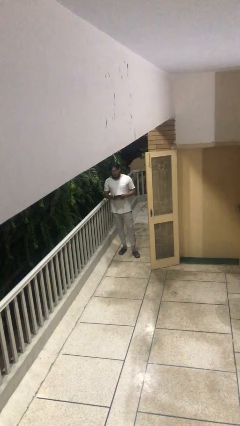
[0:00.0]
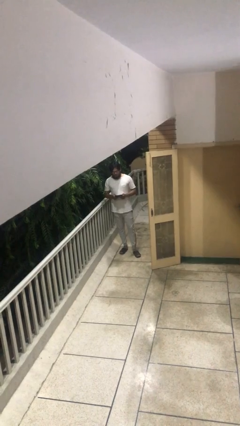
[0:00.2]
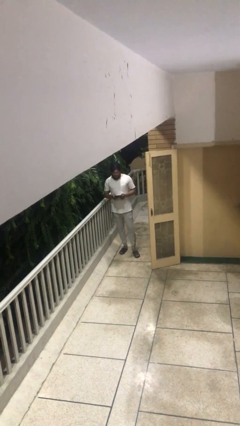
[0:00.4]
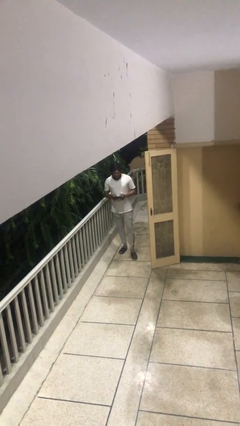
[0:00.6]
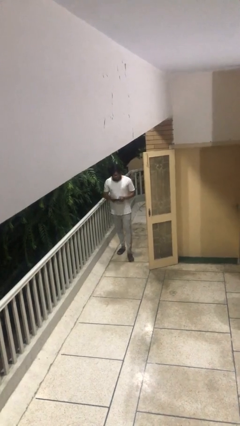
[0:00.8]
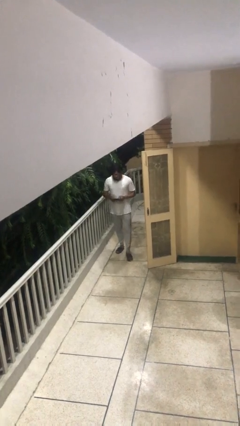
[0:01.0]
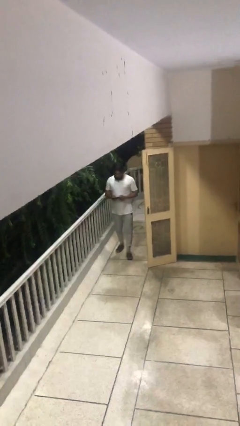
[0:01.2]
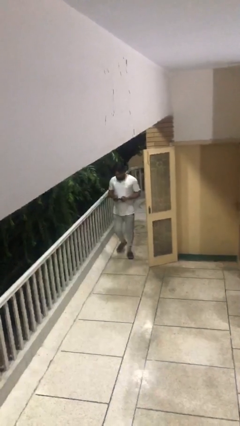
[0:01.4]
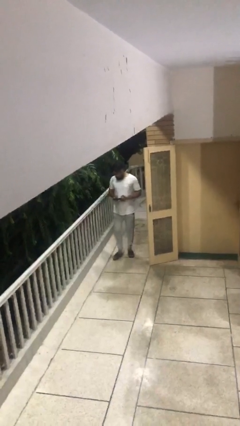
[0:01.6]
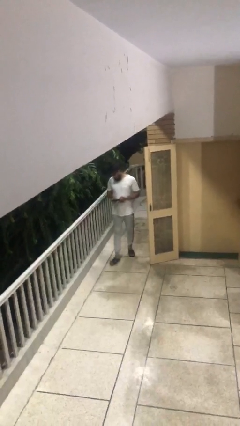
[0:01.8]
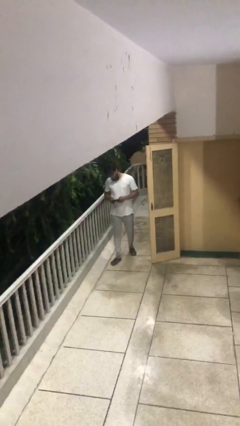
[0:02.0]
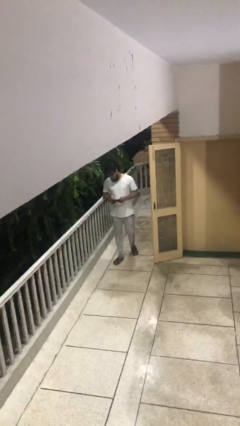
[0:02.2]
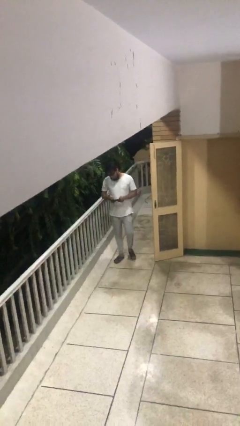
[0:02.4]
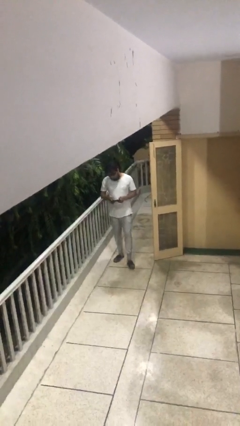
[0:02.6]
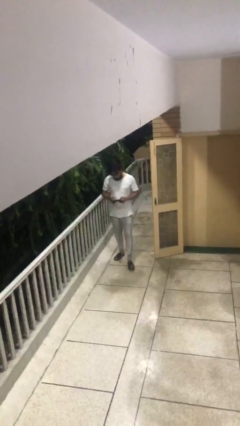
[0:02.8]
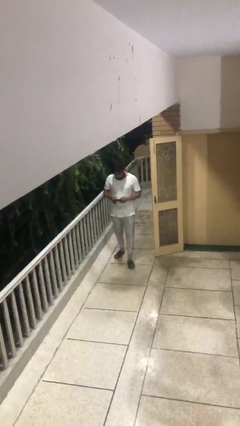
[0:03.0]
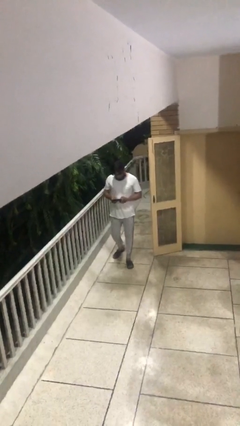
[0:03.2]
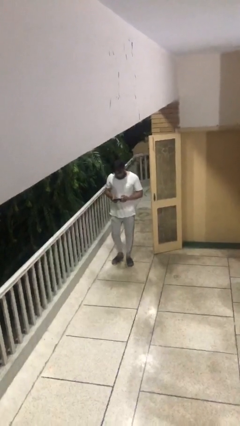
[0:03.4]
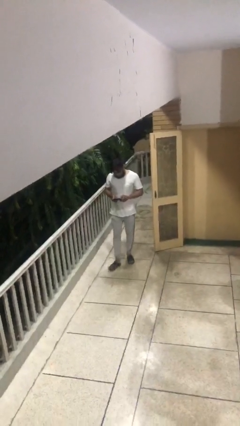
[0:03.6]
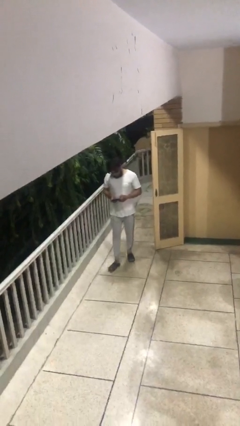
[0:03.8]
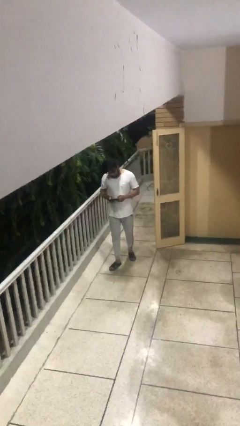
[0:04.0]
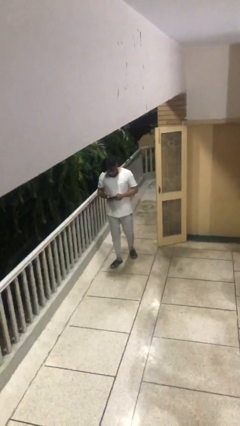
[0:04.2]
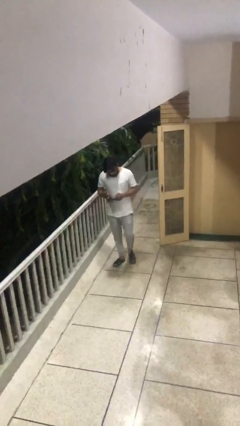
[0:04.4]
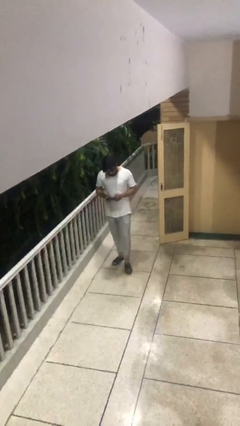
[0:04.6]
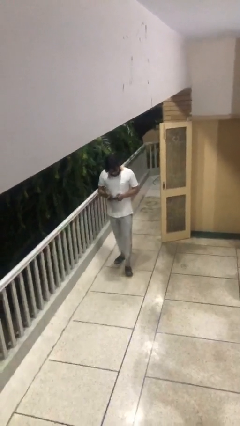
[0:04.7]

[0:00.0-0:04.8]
person texts on phone

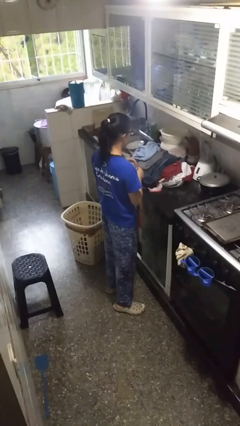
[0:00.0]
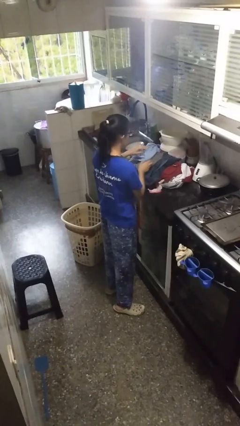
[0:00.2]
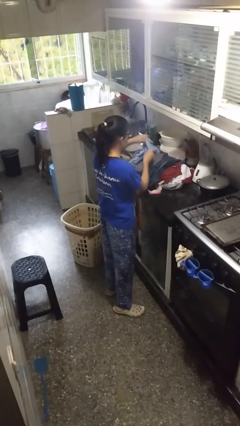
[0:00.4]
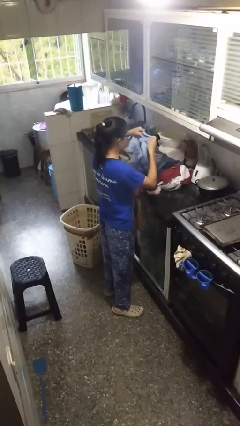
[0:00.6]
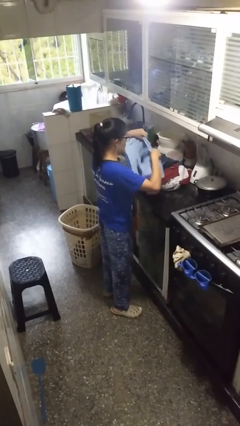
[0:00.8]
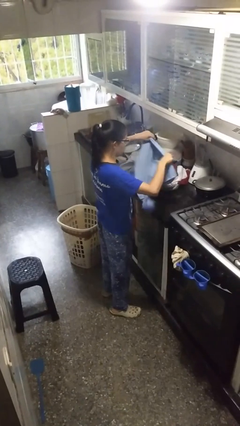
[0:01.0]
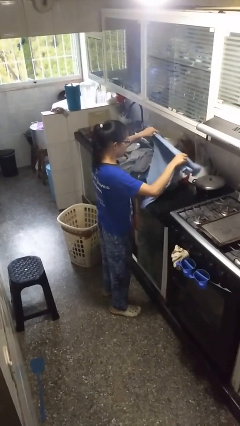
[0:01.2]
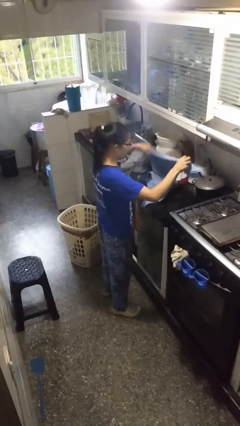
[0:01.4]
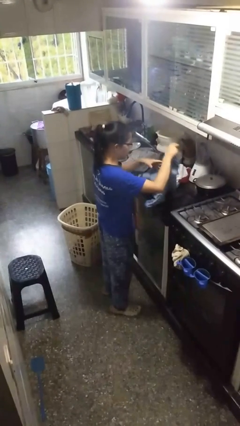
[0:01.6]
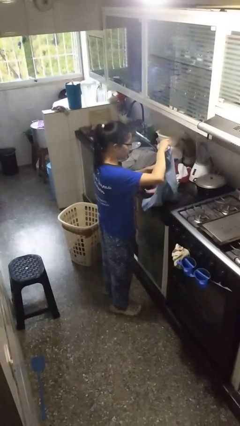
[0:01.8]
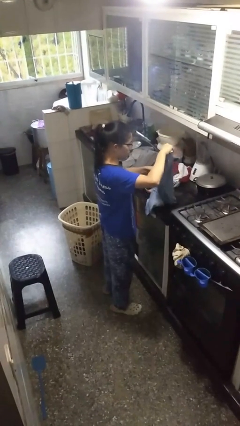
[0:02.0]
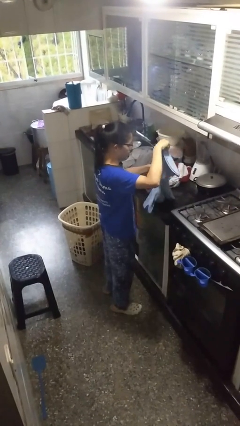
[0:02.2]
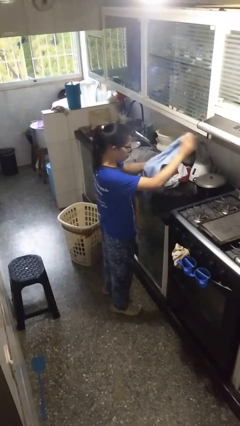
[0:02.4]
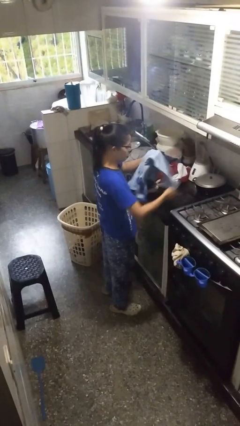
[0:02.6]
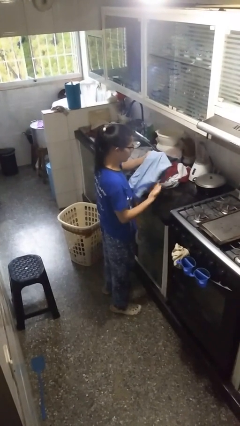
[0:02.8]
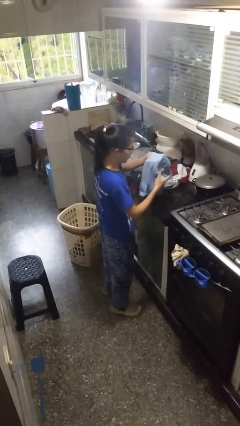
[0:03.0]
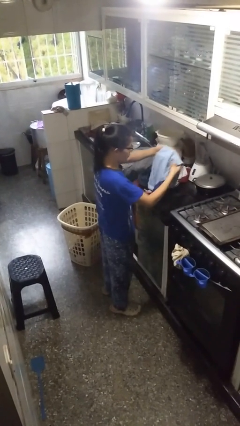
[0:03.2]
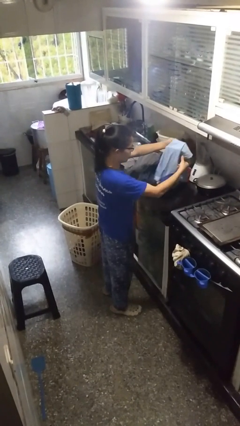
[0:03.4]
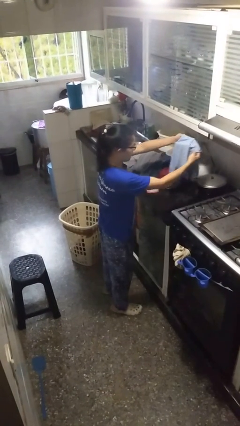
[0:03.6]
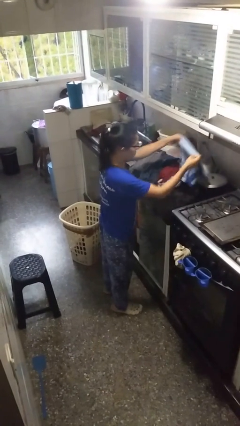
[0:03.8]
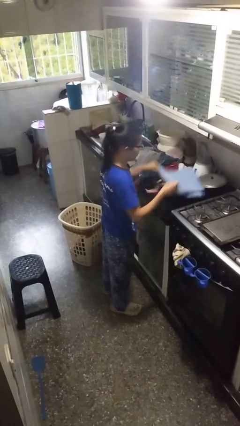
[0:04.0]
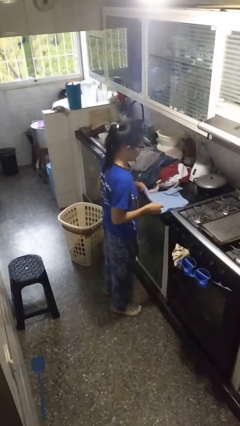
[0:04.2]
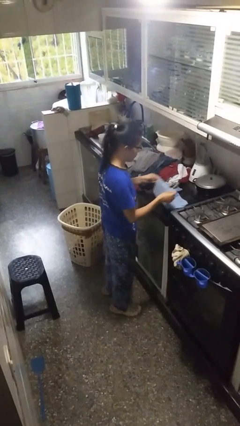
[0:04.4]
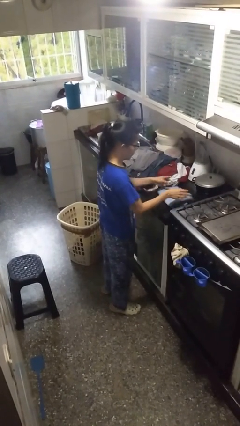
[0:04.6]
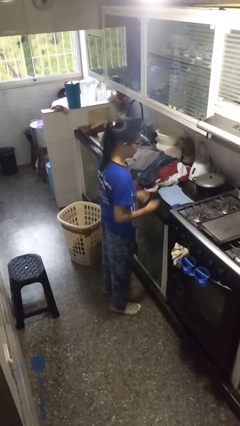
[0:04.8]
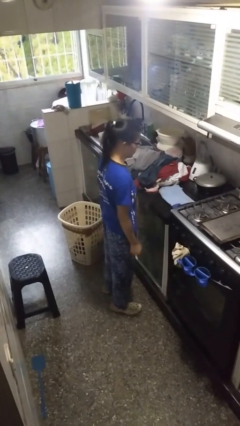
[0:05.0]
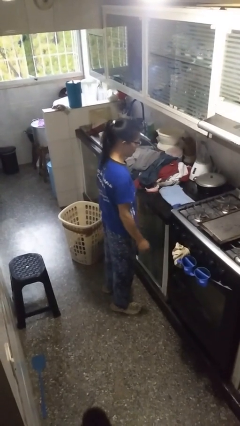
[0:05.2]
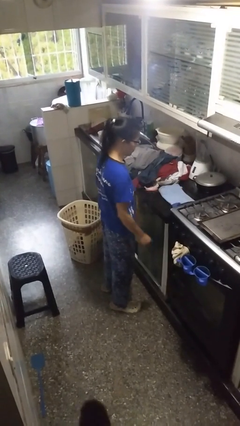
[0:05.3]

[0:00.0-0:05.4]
person folds shirt

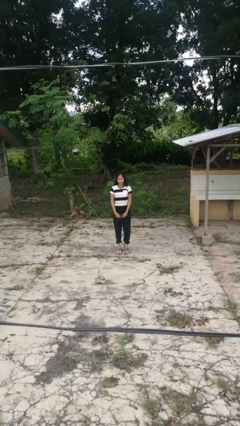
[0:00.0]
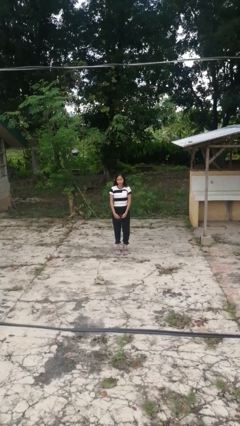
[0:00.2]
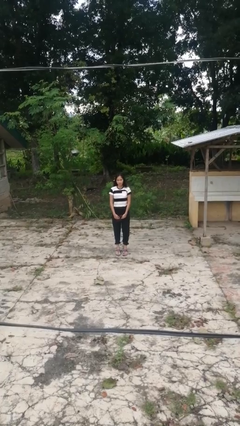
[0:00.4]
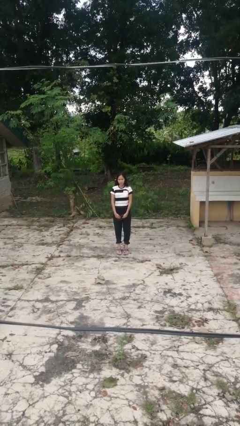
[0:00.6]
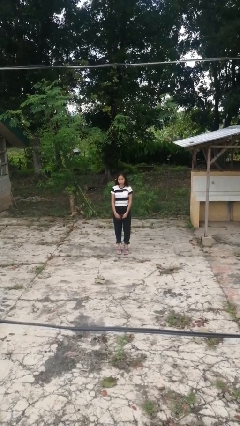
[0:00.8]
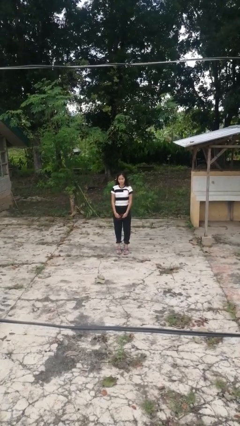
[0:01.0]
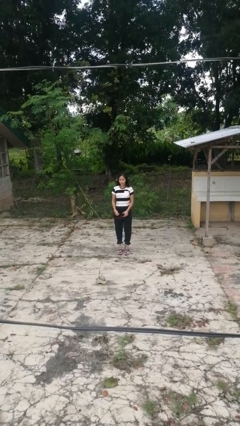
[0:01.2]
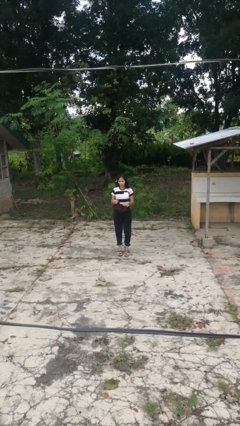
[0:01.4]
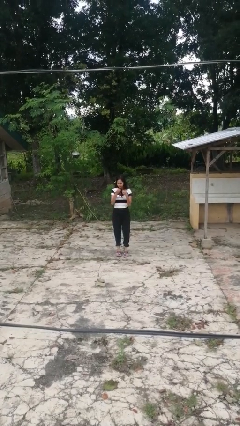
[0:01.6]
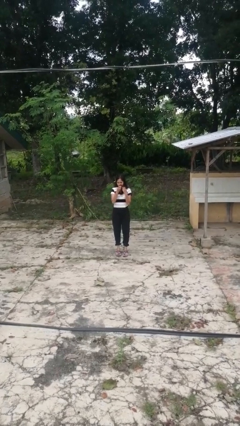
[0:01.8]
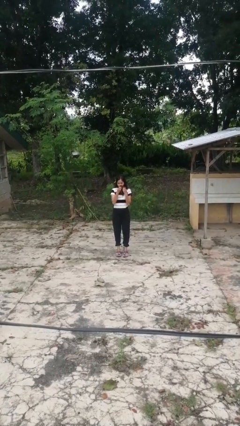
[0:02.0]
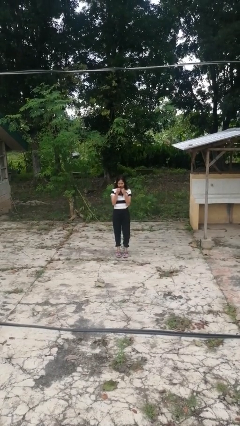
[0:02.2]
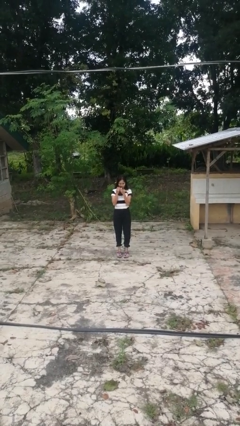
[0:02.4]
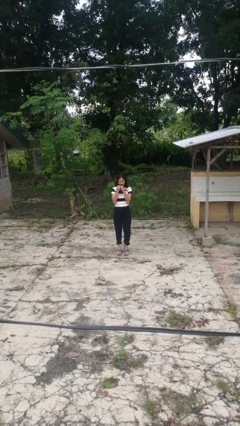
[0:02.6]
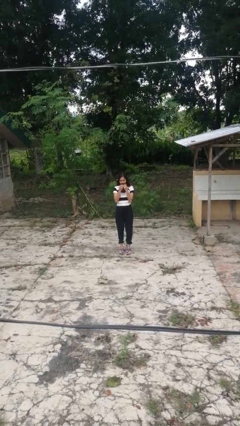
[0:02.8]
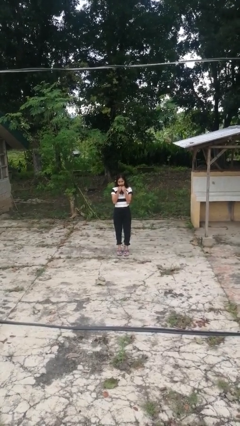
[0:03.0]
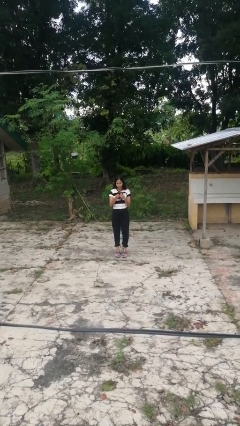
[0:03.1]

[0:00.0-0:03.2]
person wipes mouth with napkin

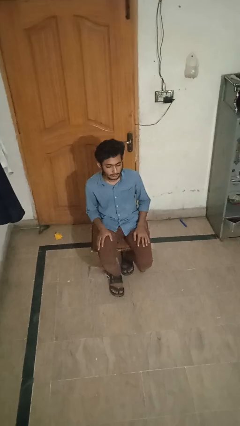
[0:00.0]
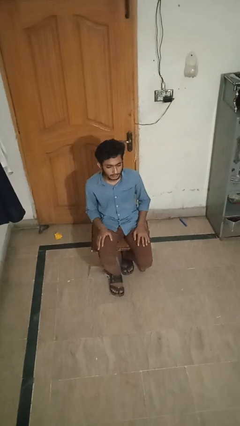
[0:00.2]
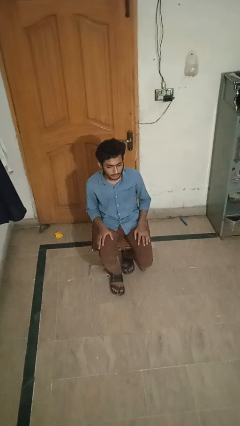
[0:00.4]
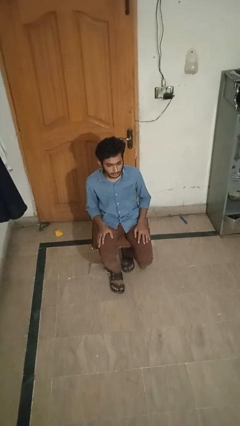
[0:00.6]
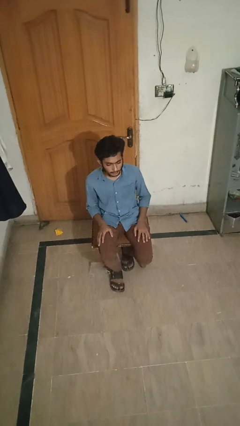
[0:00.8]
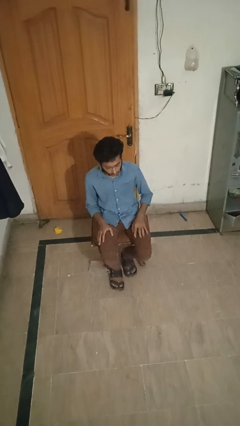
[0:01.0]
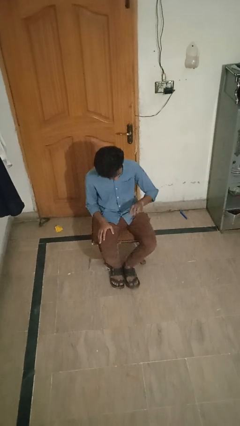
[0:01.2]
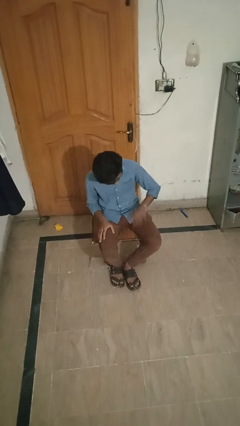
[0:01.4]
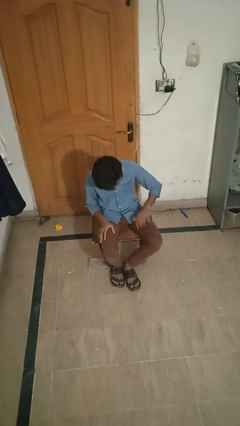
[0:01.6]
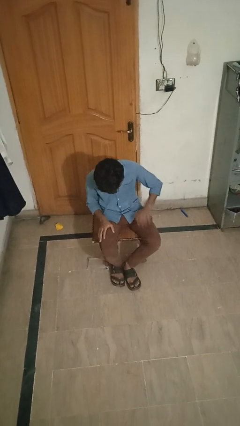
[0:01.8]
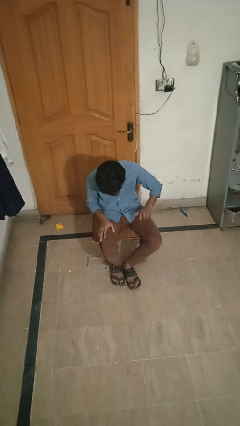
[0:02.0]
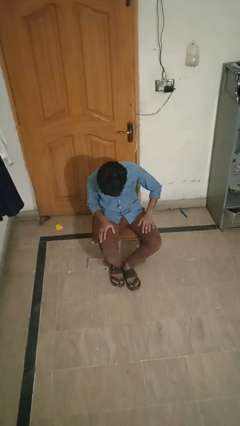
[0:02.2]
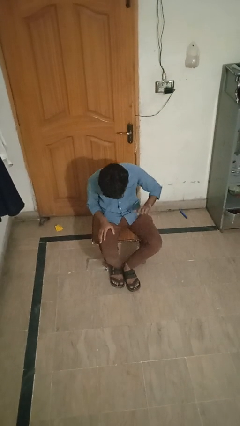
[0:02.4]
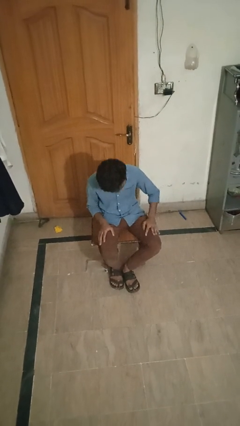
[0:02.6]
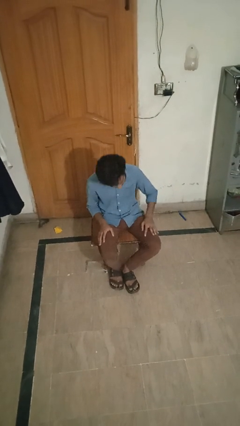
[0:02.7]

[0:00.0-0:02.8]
person slaps hands on thighs

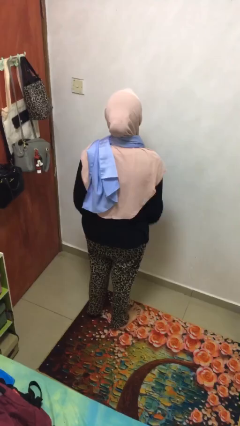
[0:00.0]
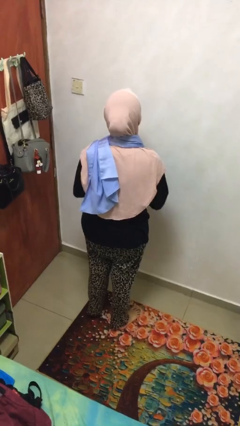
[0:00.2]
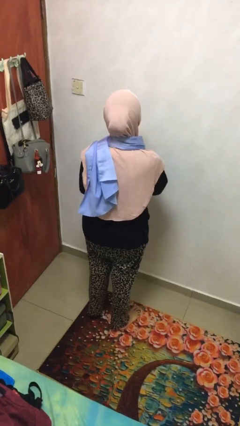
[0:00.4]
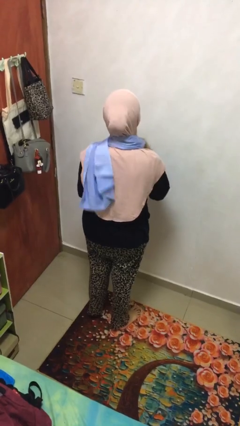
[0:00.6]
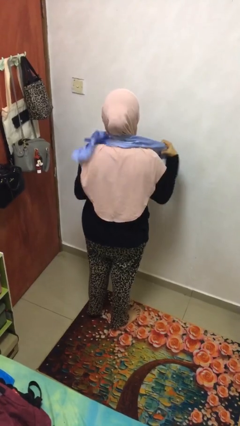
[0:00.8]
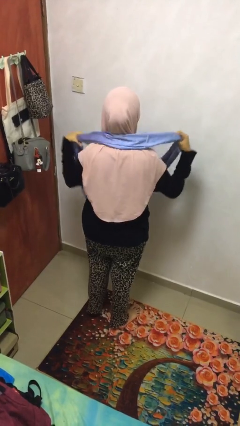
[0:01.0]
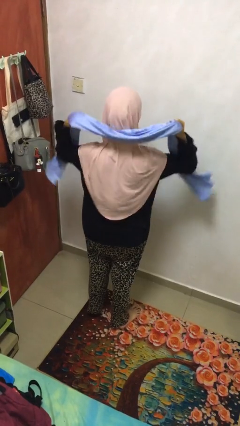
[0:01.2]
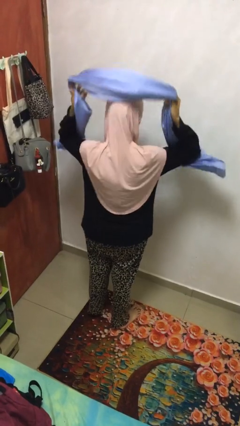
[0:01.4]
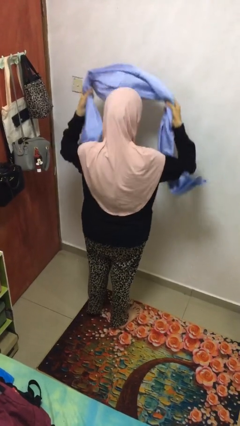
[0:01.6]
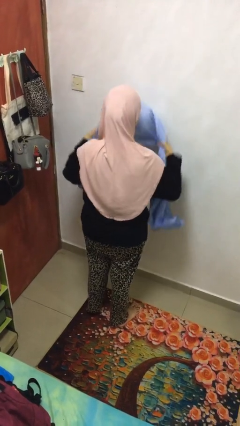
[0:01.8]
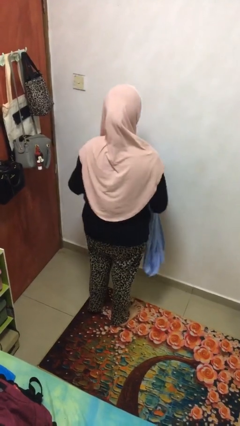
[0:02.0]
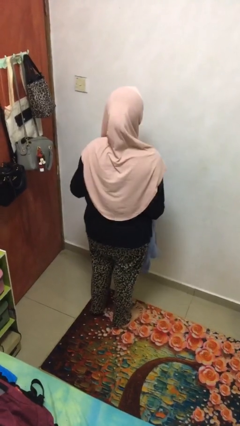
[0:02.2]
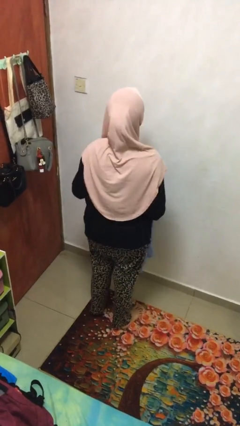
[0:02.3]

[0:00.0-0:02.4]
person takes off scarf
